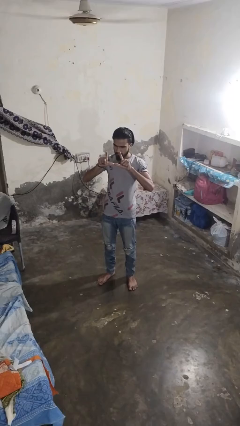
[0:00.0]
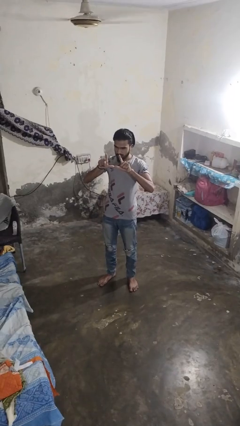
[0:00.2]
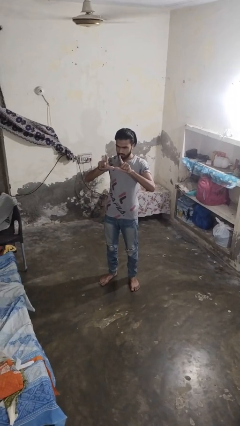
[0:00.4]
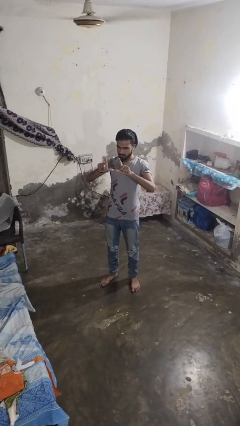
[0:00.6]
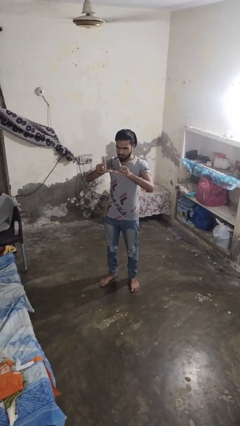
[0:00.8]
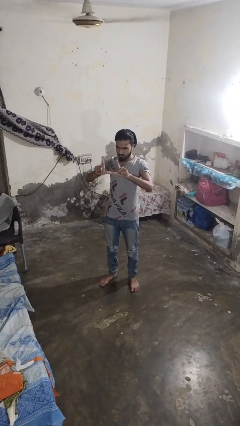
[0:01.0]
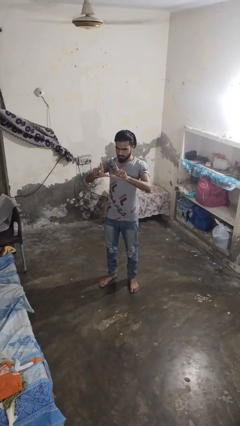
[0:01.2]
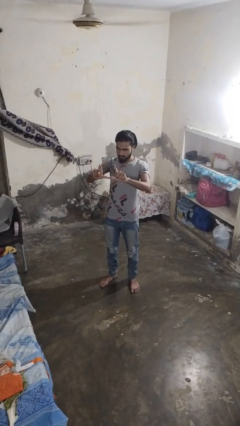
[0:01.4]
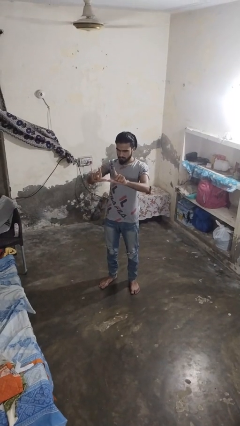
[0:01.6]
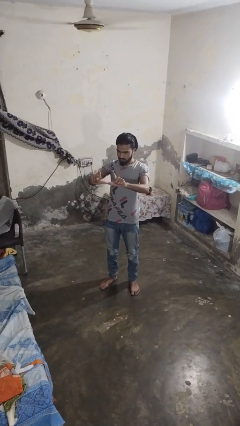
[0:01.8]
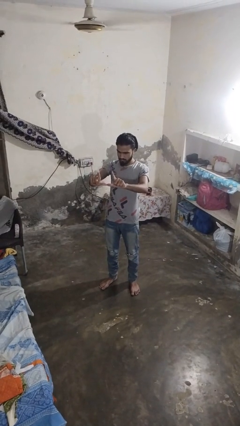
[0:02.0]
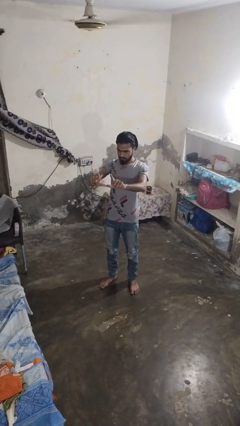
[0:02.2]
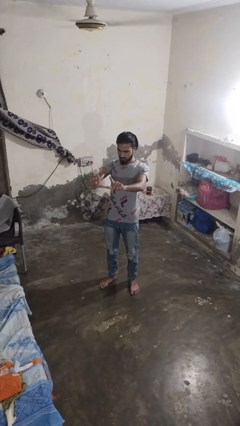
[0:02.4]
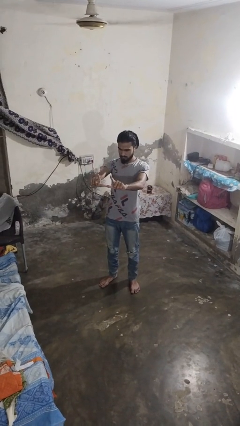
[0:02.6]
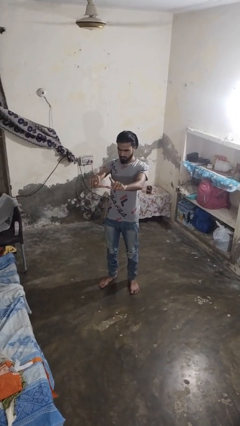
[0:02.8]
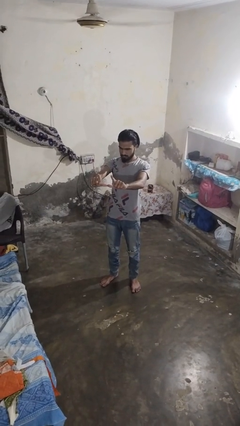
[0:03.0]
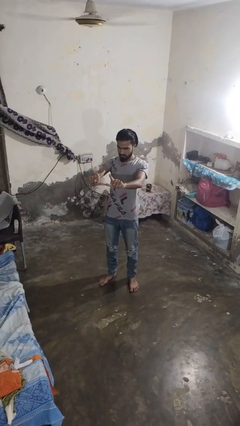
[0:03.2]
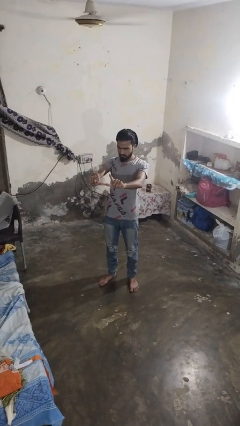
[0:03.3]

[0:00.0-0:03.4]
person gestures zoom out

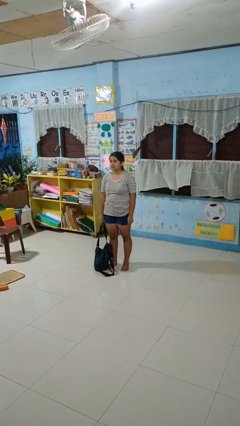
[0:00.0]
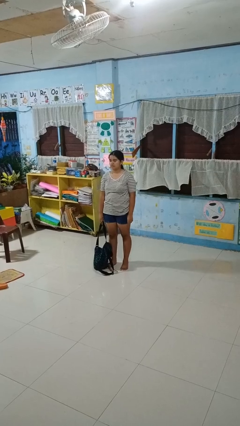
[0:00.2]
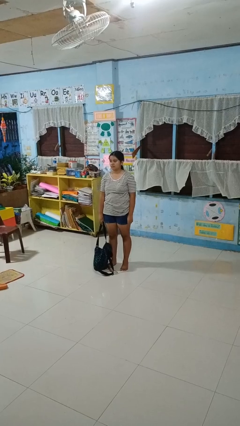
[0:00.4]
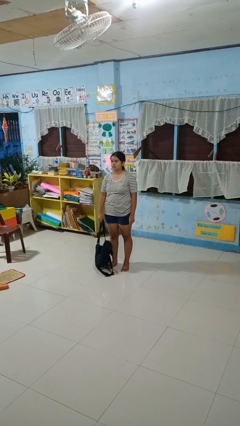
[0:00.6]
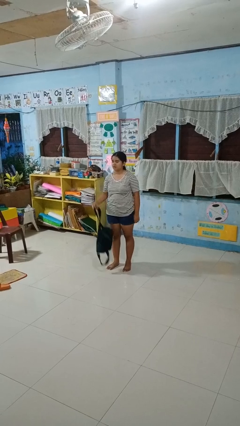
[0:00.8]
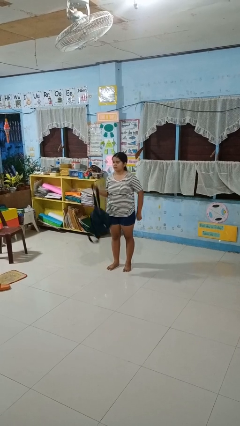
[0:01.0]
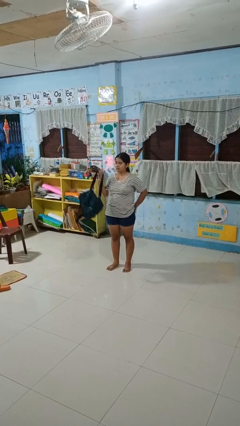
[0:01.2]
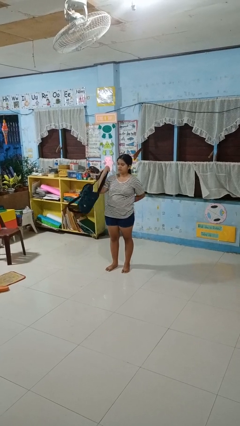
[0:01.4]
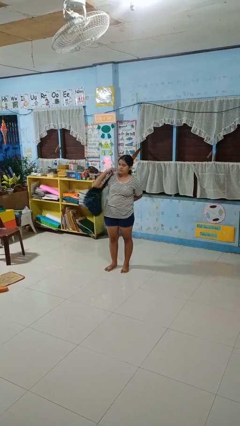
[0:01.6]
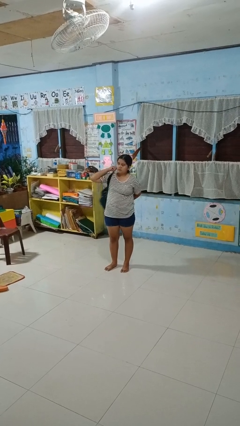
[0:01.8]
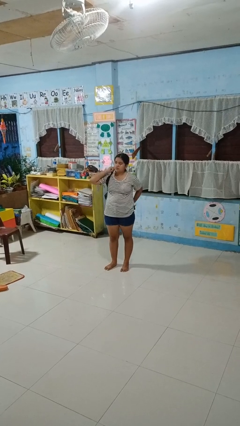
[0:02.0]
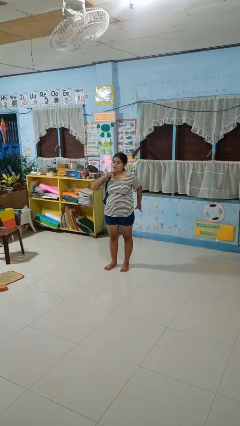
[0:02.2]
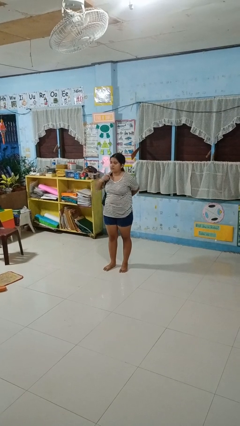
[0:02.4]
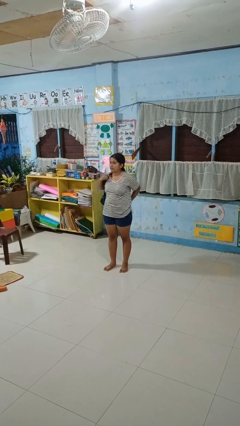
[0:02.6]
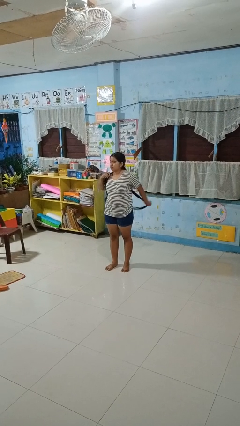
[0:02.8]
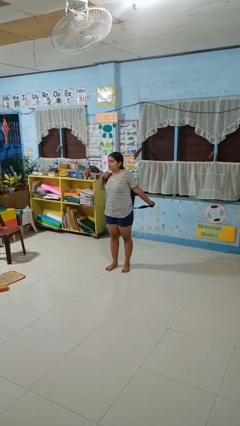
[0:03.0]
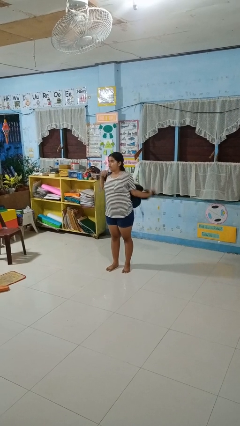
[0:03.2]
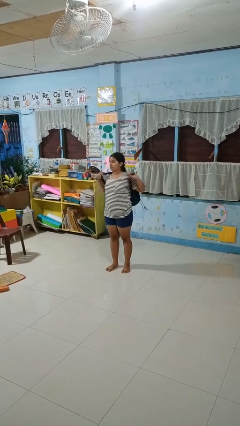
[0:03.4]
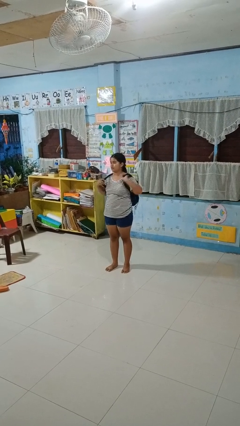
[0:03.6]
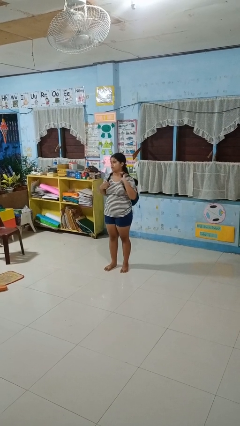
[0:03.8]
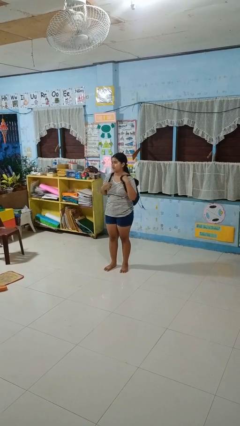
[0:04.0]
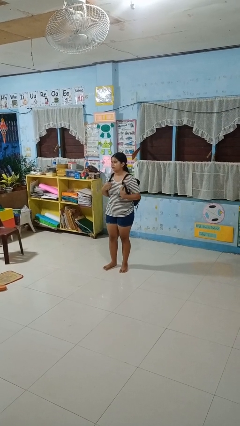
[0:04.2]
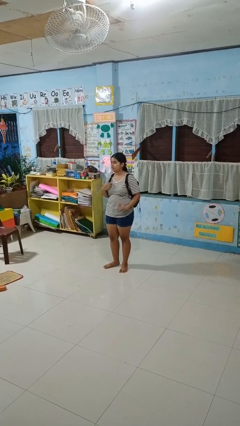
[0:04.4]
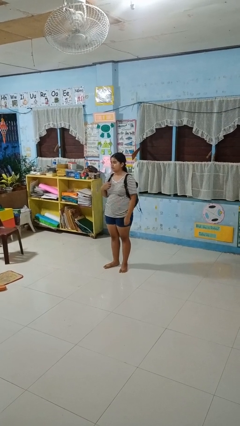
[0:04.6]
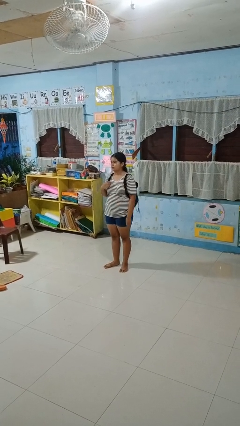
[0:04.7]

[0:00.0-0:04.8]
person puts on backpack

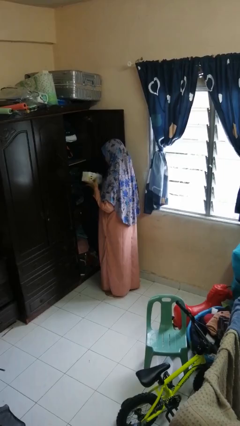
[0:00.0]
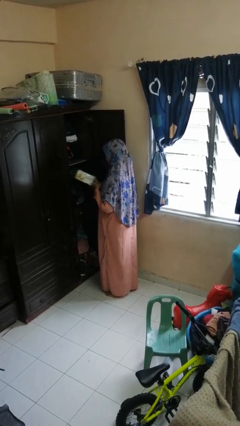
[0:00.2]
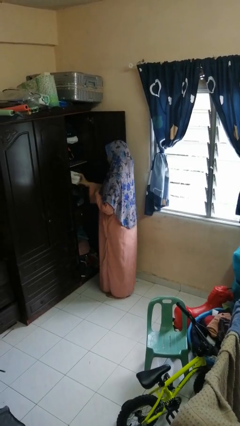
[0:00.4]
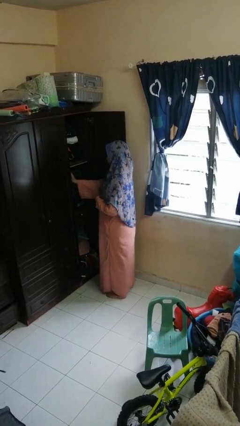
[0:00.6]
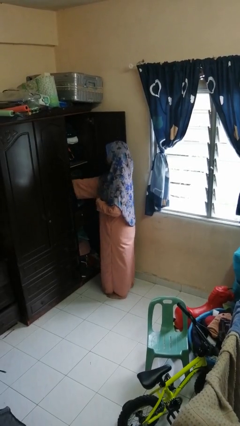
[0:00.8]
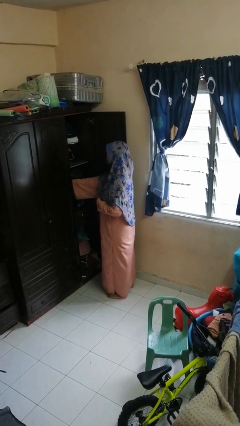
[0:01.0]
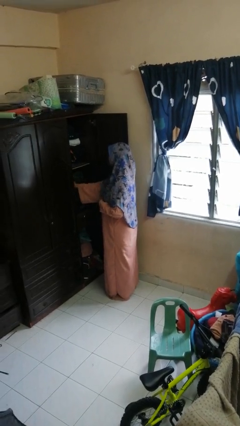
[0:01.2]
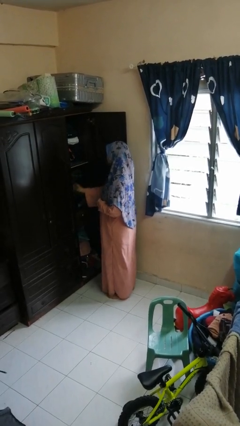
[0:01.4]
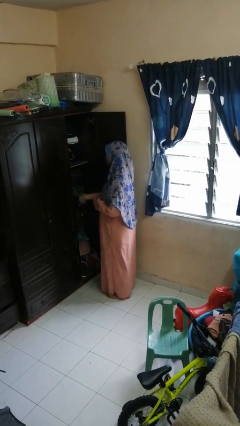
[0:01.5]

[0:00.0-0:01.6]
person puts down object into cabinet

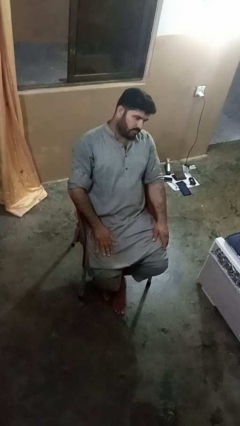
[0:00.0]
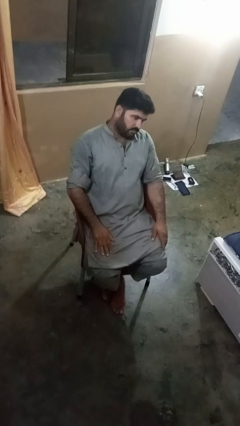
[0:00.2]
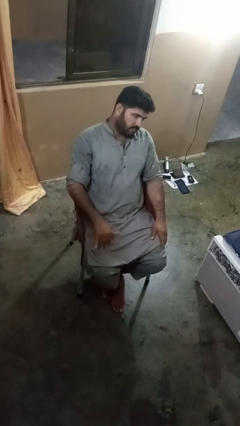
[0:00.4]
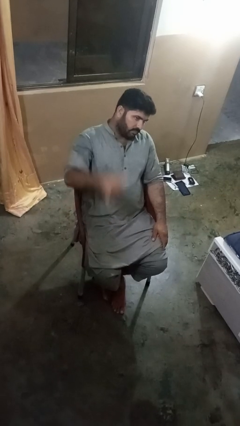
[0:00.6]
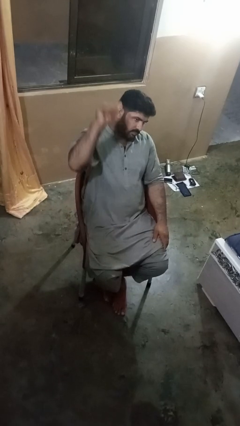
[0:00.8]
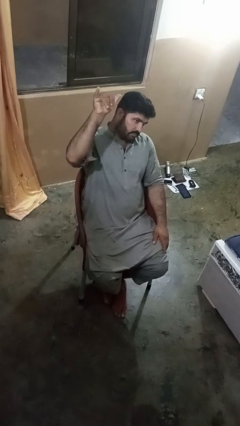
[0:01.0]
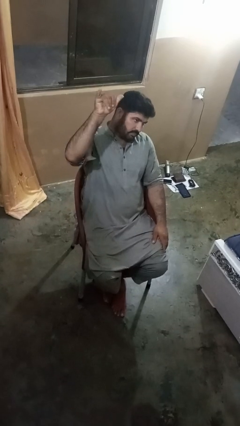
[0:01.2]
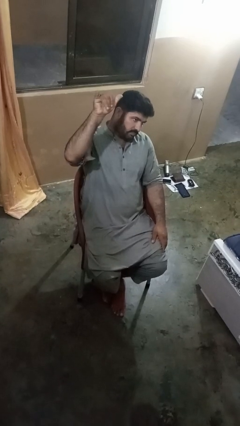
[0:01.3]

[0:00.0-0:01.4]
person gestures hang loose

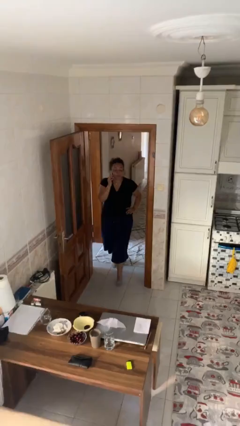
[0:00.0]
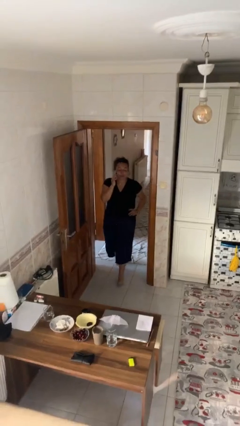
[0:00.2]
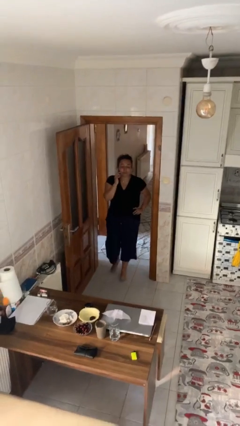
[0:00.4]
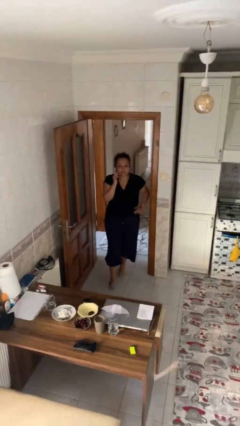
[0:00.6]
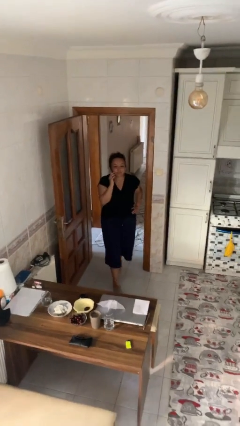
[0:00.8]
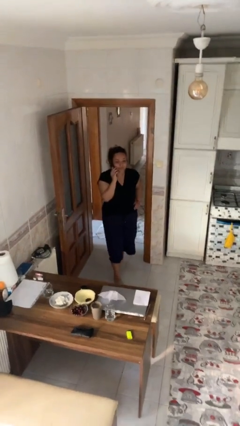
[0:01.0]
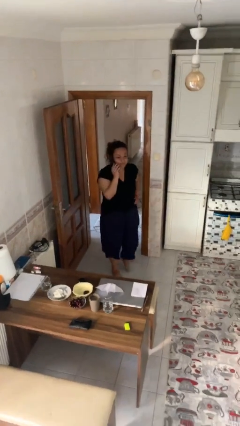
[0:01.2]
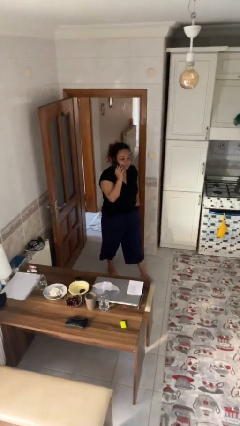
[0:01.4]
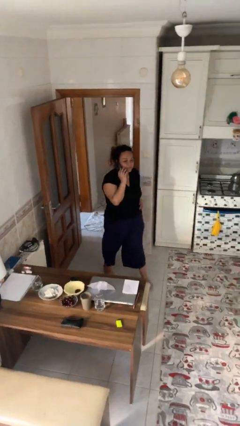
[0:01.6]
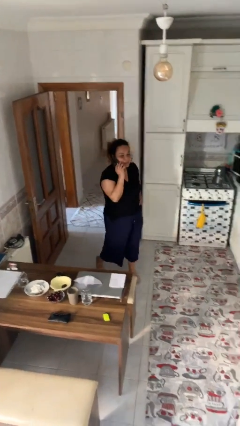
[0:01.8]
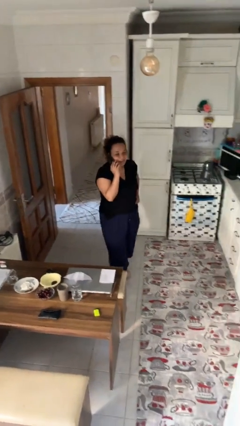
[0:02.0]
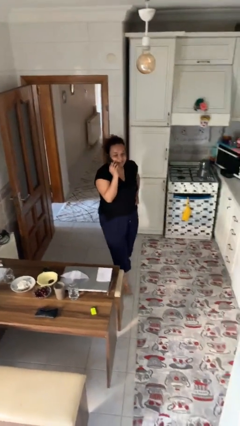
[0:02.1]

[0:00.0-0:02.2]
person enters scene through structure

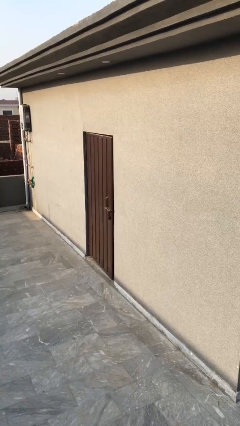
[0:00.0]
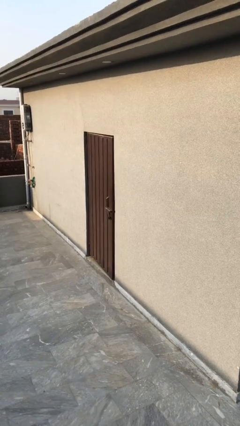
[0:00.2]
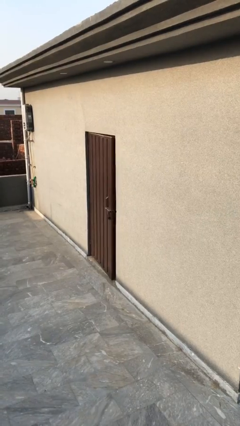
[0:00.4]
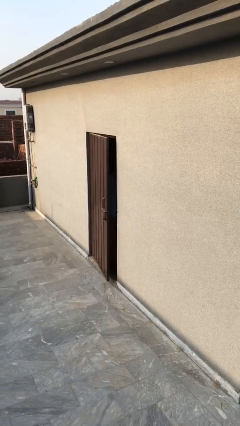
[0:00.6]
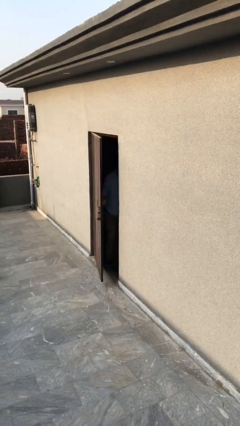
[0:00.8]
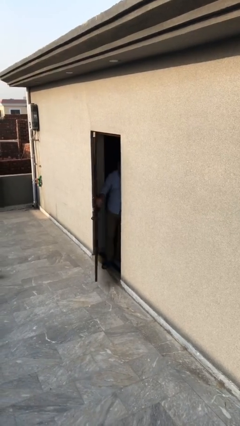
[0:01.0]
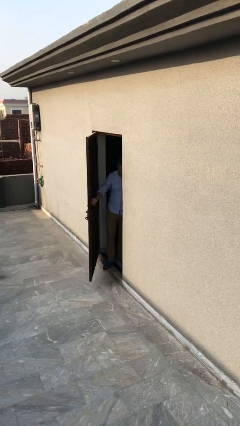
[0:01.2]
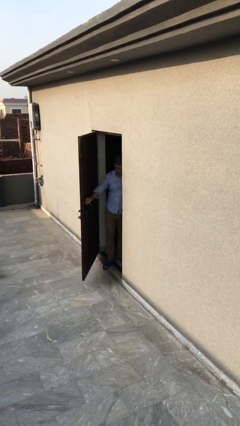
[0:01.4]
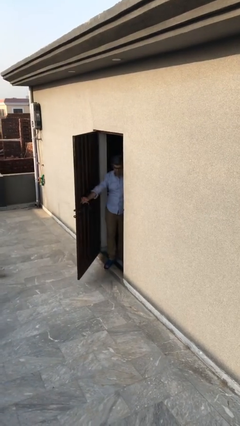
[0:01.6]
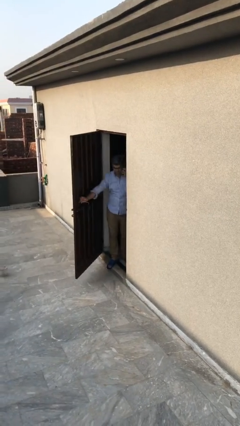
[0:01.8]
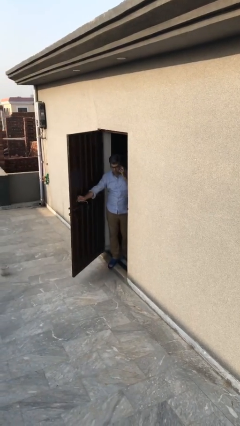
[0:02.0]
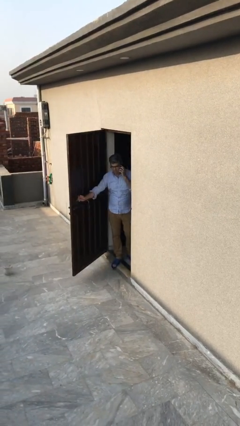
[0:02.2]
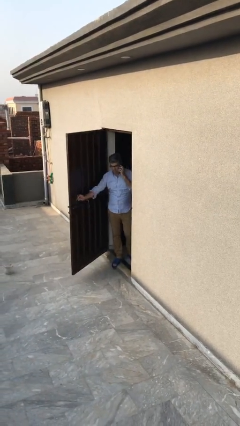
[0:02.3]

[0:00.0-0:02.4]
person opens facility door

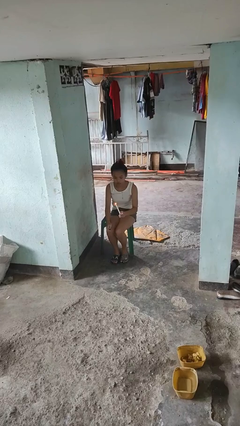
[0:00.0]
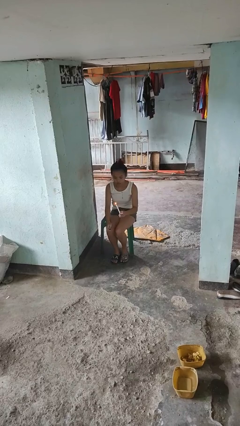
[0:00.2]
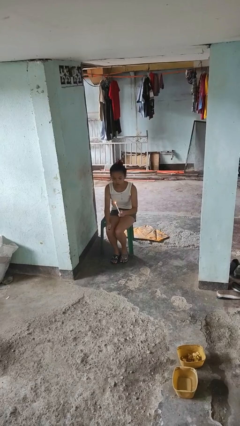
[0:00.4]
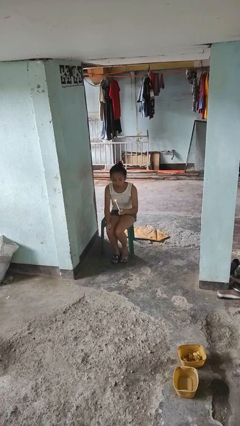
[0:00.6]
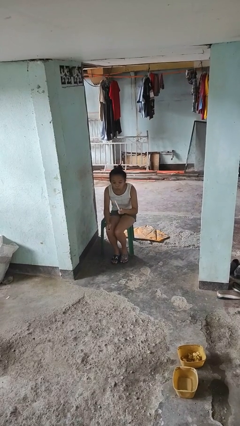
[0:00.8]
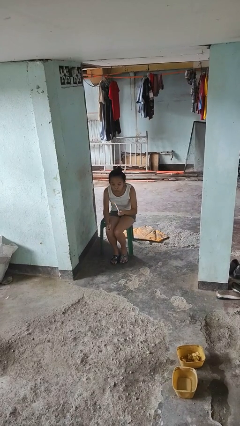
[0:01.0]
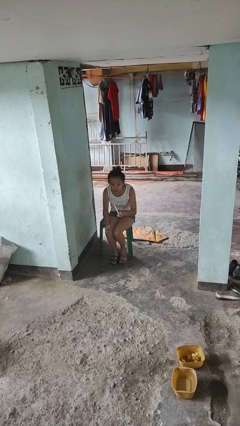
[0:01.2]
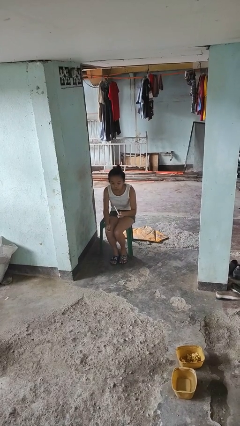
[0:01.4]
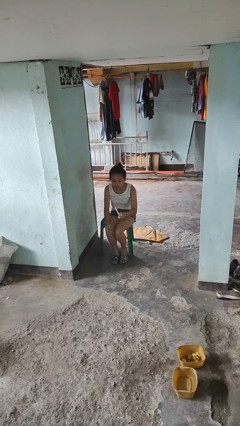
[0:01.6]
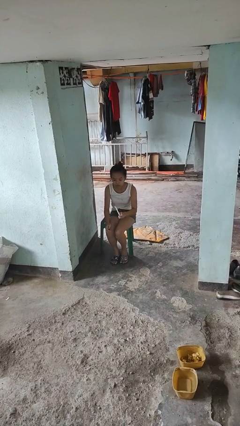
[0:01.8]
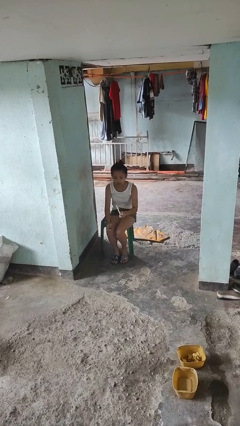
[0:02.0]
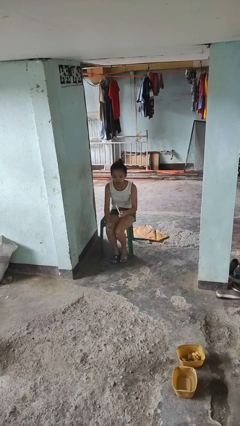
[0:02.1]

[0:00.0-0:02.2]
person extinguishes candle
